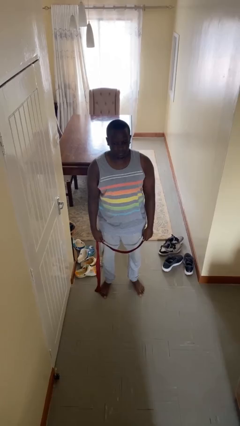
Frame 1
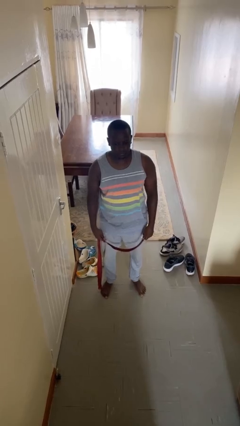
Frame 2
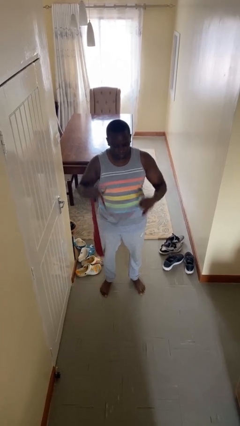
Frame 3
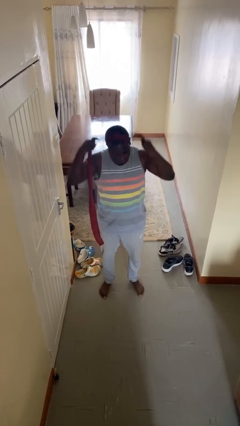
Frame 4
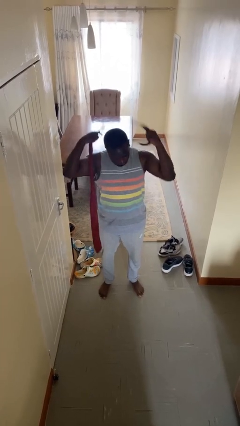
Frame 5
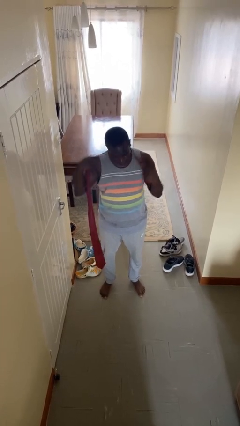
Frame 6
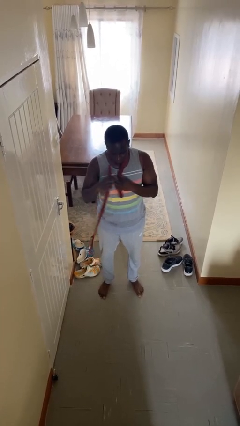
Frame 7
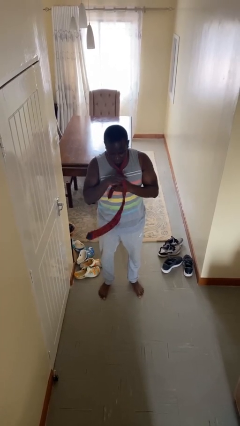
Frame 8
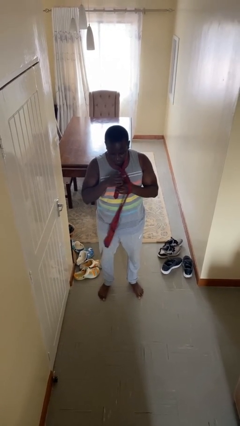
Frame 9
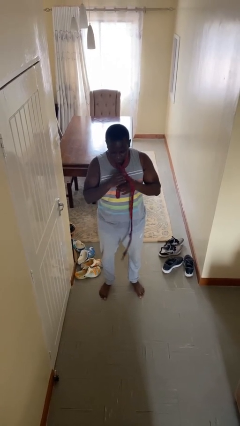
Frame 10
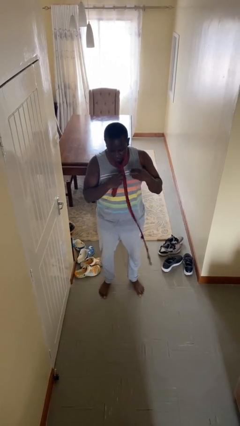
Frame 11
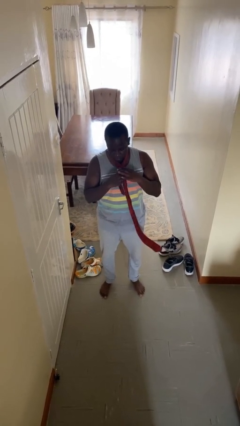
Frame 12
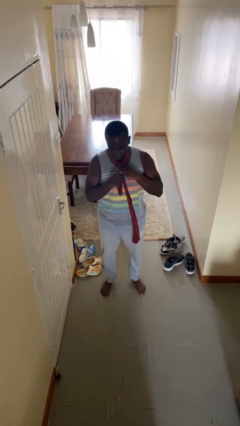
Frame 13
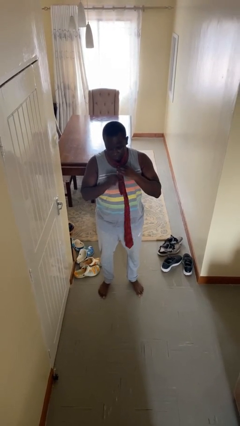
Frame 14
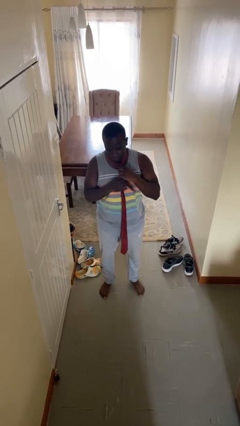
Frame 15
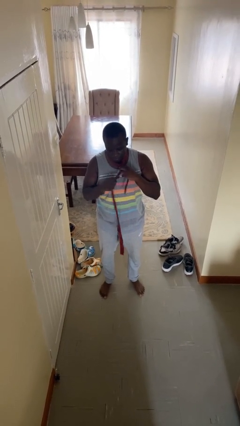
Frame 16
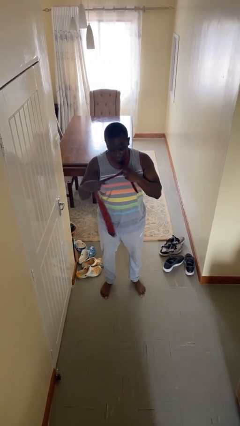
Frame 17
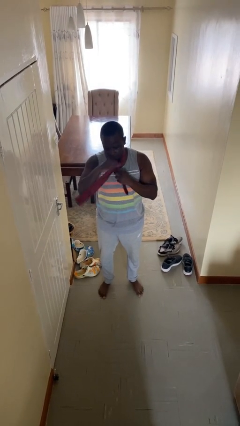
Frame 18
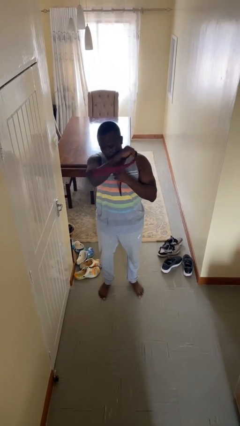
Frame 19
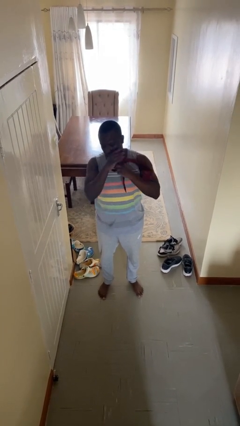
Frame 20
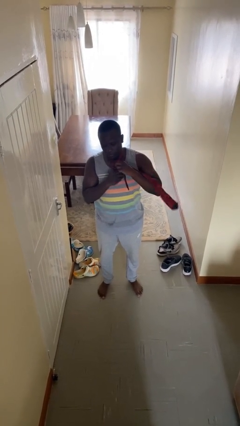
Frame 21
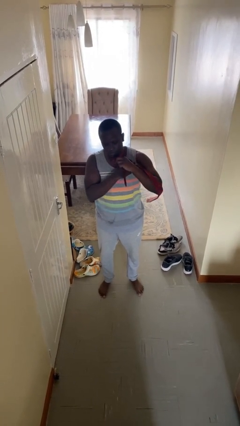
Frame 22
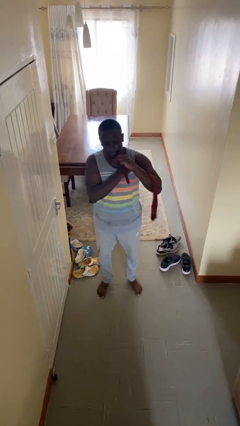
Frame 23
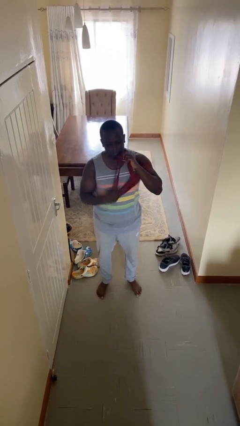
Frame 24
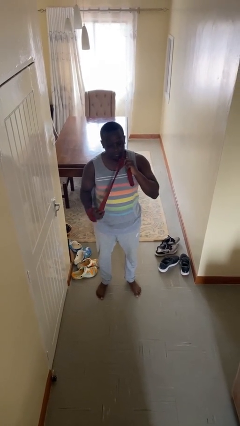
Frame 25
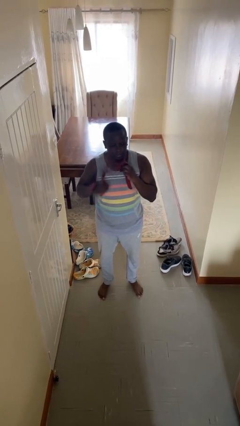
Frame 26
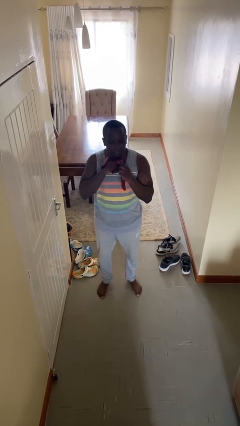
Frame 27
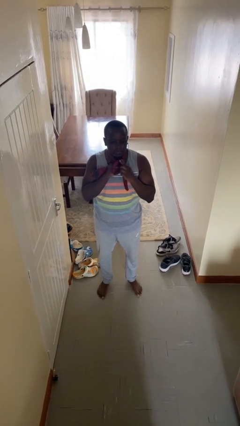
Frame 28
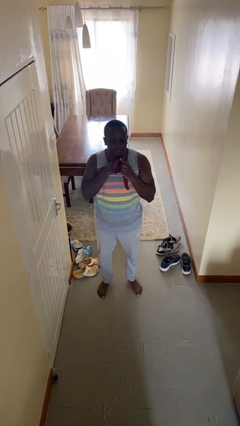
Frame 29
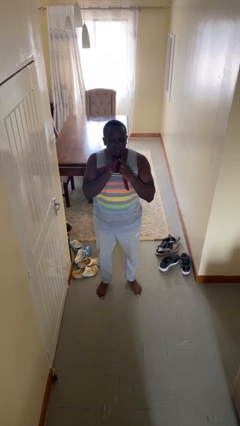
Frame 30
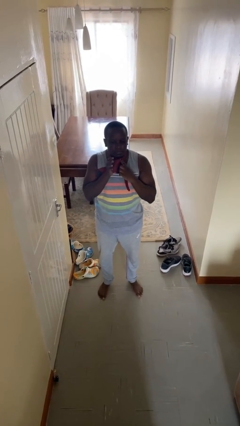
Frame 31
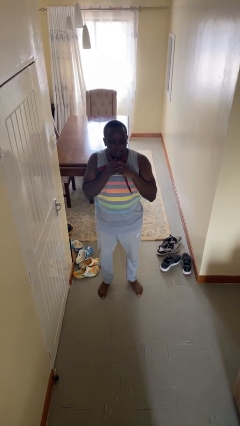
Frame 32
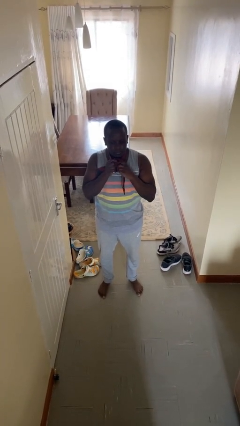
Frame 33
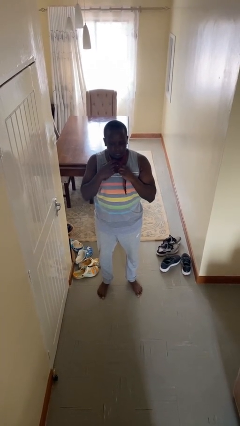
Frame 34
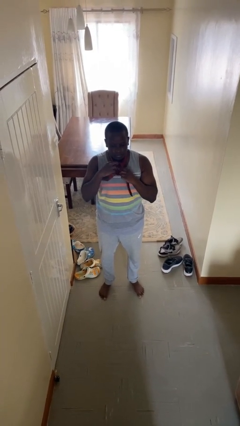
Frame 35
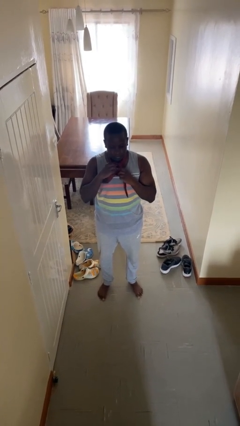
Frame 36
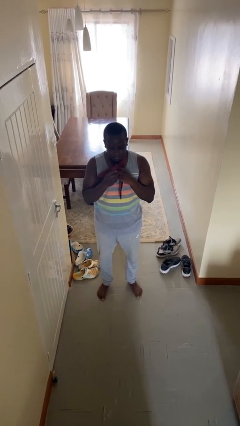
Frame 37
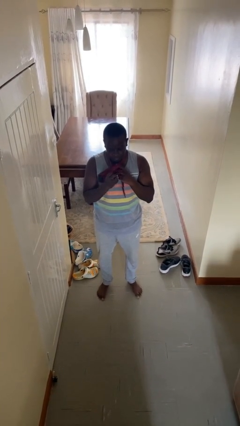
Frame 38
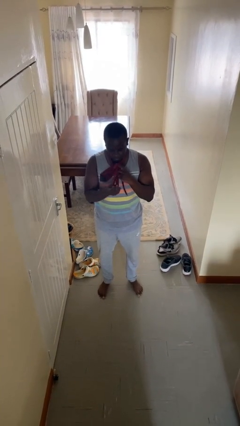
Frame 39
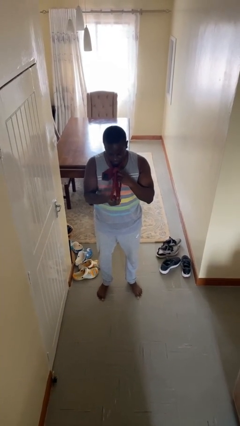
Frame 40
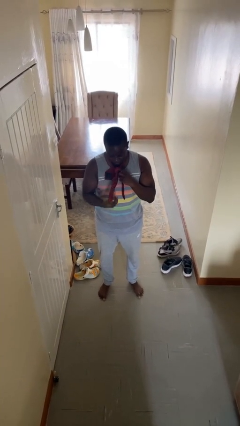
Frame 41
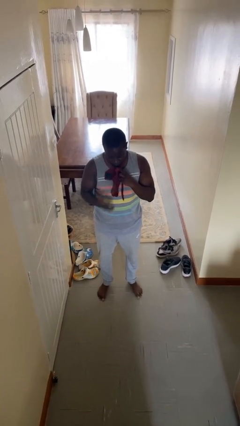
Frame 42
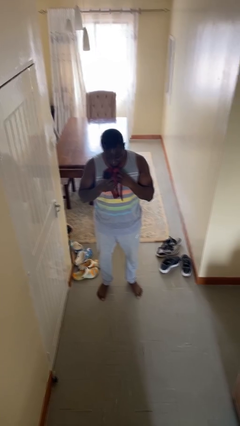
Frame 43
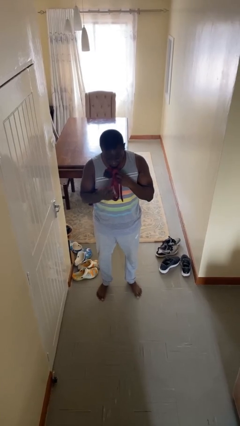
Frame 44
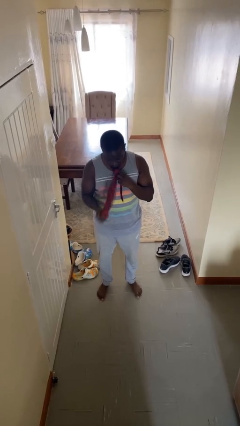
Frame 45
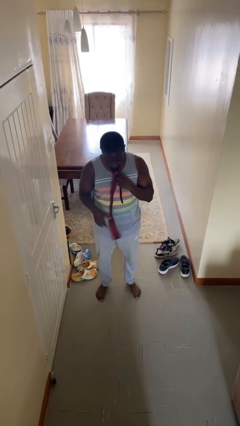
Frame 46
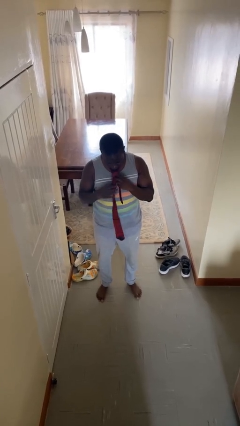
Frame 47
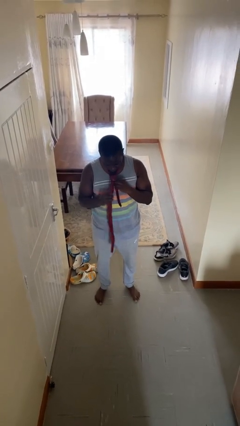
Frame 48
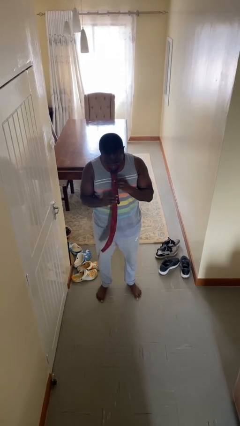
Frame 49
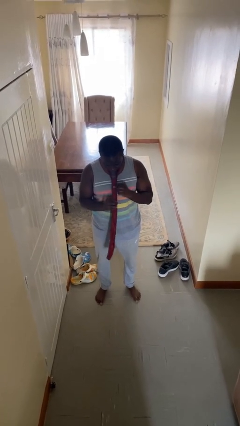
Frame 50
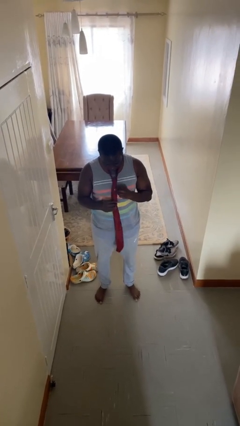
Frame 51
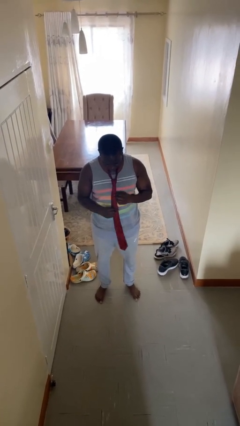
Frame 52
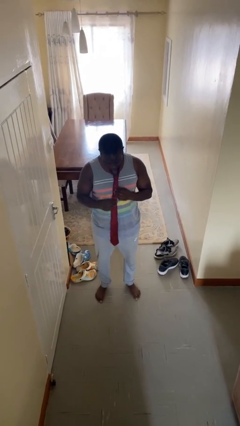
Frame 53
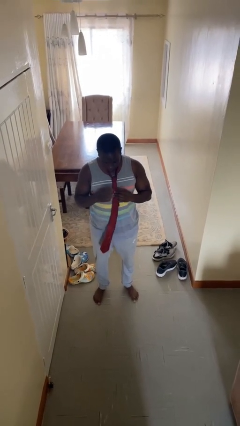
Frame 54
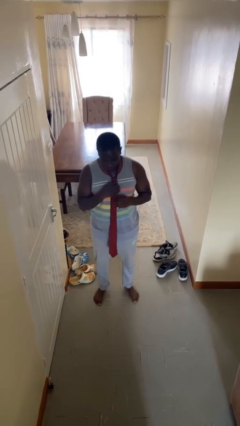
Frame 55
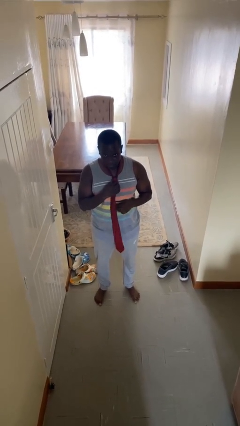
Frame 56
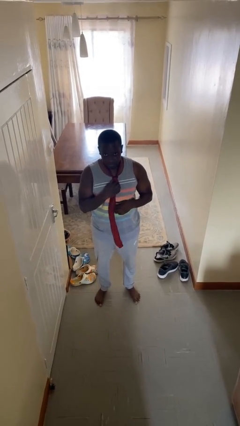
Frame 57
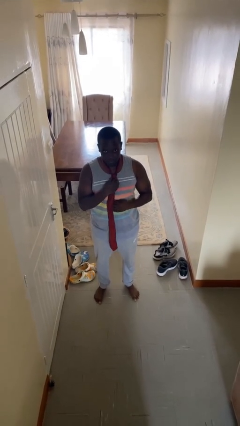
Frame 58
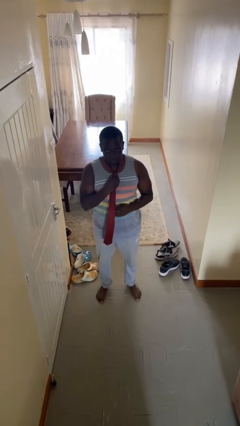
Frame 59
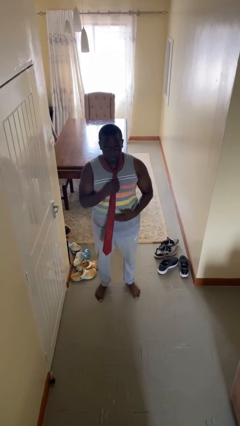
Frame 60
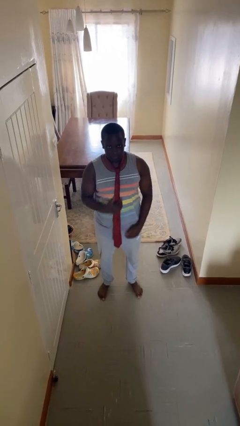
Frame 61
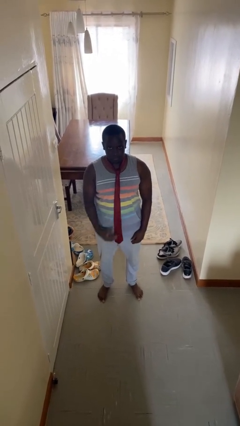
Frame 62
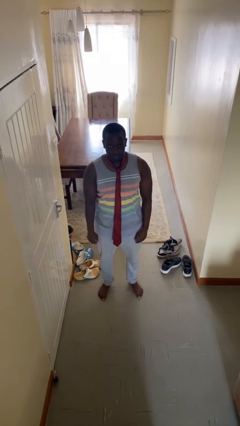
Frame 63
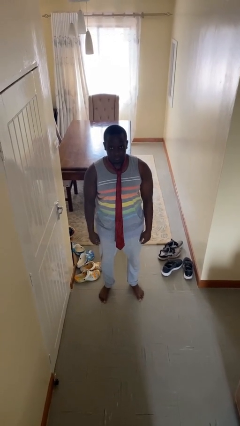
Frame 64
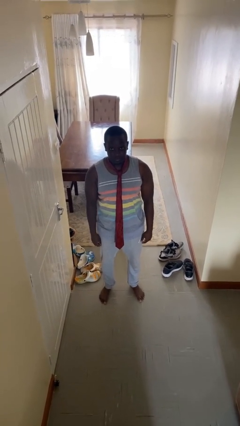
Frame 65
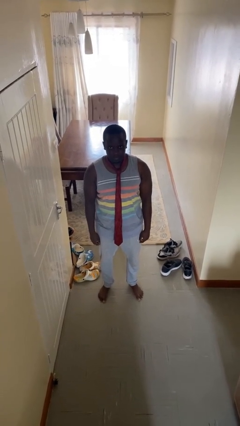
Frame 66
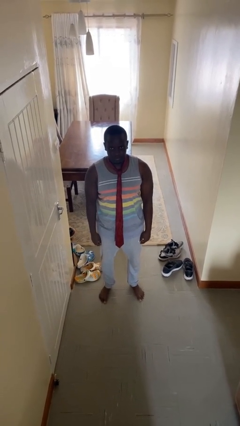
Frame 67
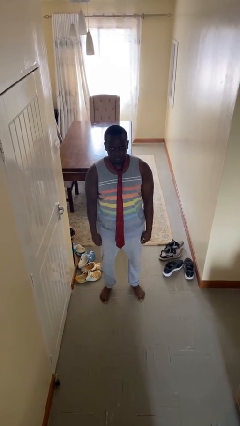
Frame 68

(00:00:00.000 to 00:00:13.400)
person puts on necktie

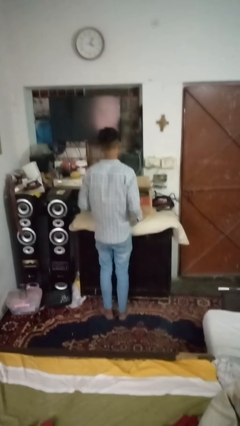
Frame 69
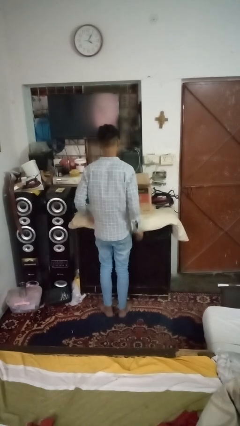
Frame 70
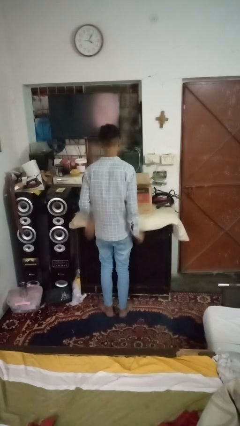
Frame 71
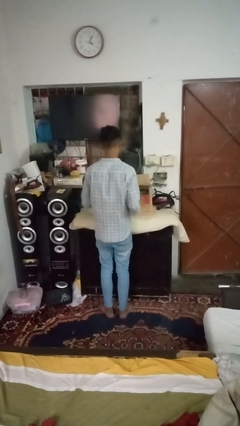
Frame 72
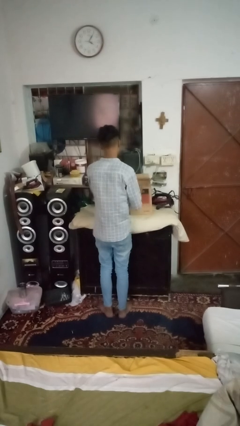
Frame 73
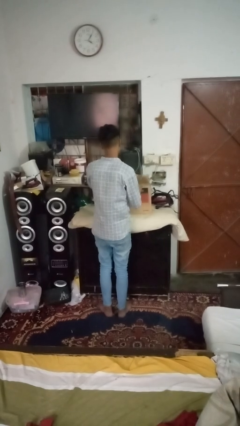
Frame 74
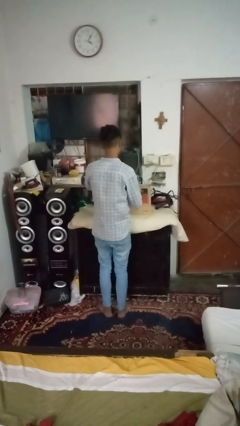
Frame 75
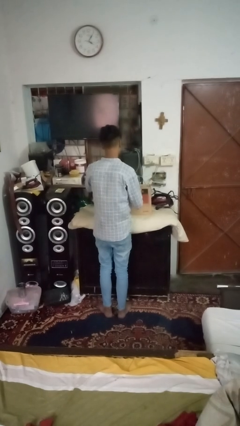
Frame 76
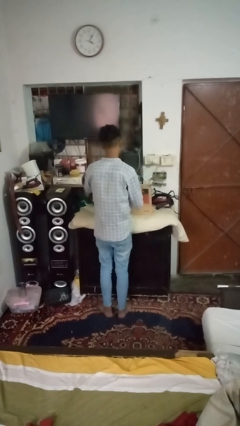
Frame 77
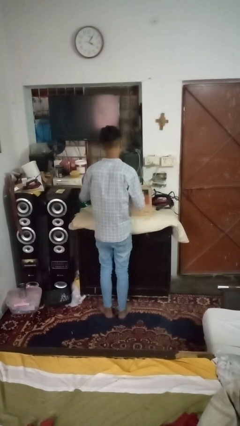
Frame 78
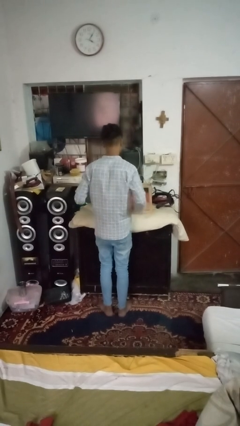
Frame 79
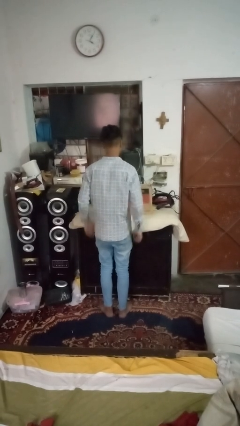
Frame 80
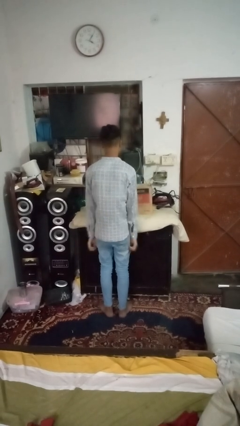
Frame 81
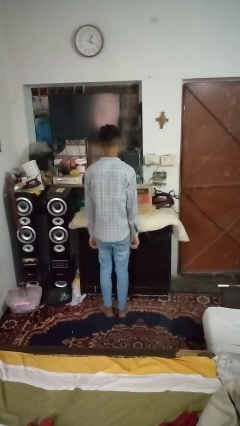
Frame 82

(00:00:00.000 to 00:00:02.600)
person closes box

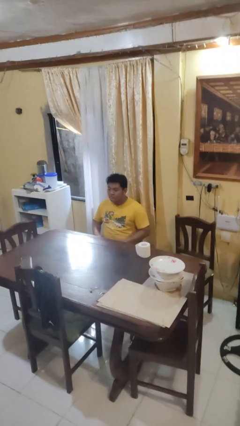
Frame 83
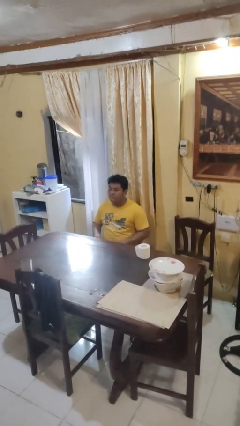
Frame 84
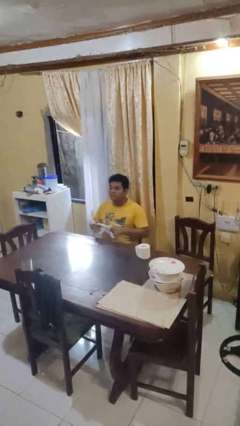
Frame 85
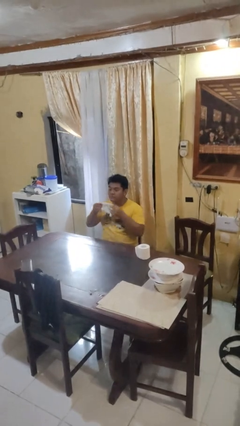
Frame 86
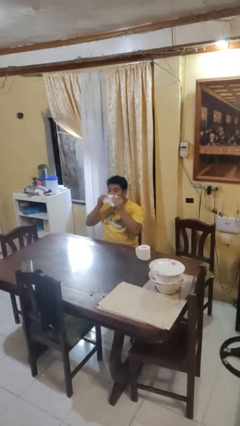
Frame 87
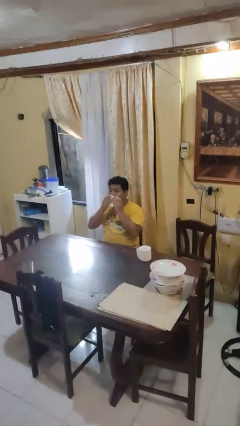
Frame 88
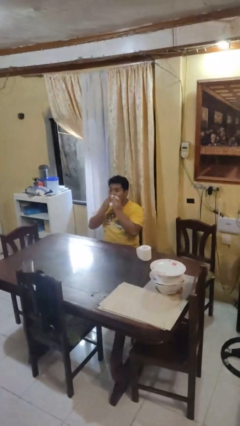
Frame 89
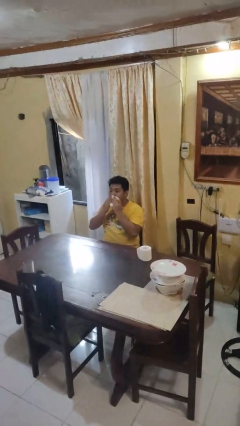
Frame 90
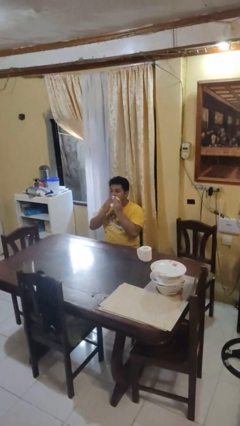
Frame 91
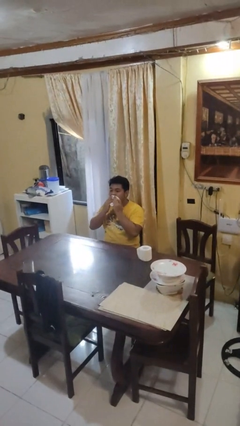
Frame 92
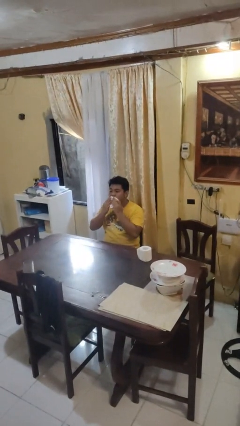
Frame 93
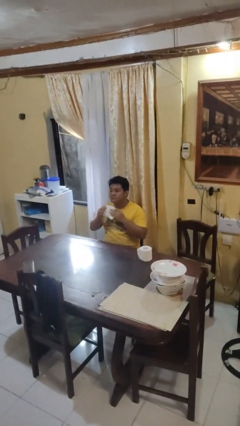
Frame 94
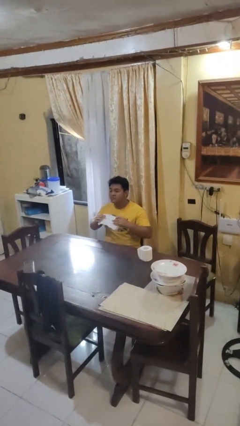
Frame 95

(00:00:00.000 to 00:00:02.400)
person wipes mouth with napkin
